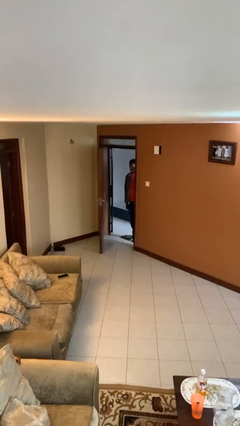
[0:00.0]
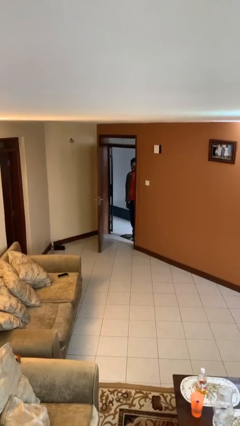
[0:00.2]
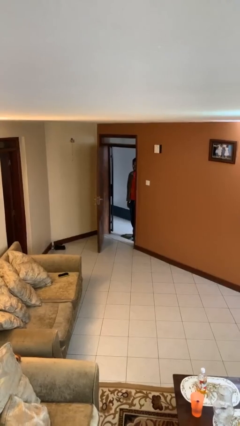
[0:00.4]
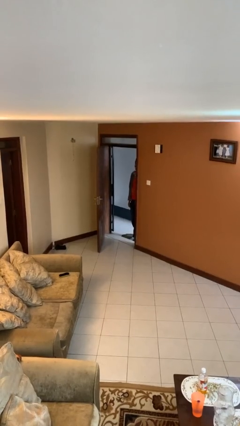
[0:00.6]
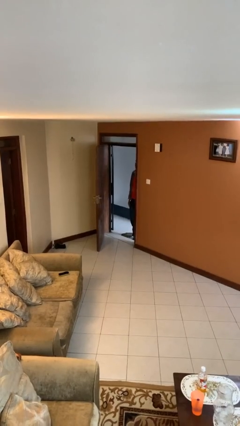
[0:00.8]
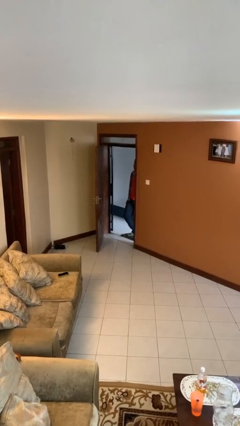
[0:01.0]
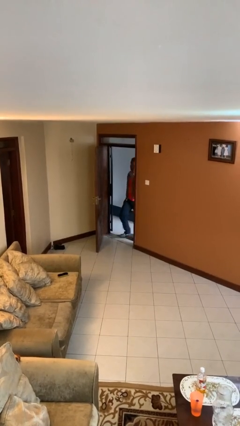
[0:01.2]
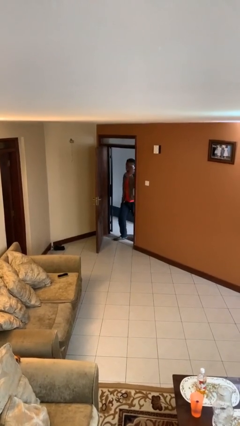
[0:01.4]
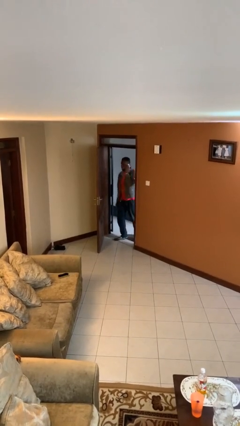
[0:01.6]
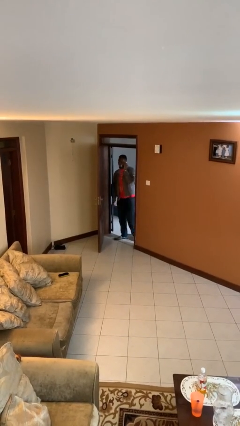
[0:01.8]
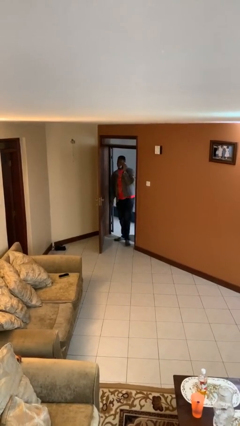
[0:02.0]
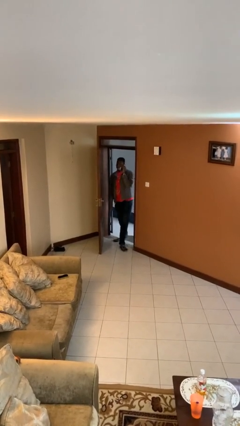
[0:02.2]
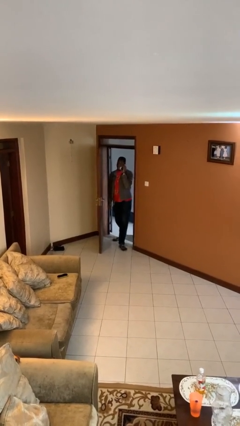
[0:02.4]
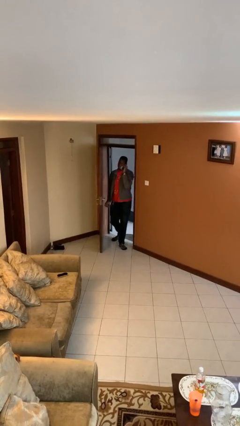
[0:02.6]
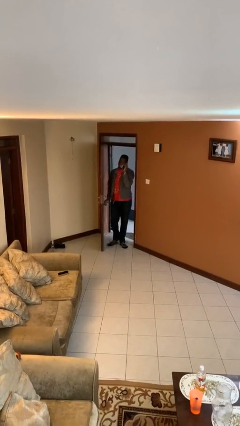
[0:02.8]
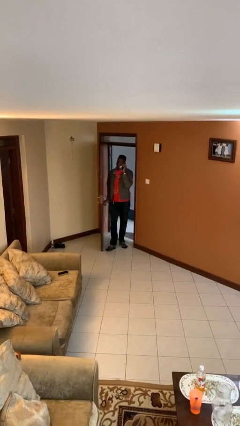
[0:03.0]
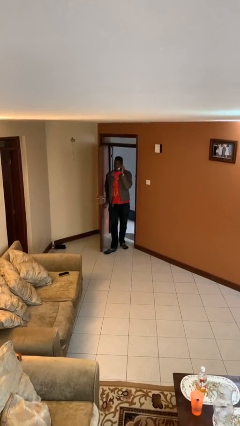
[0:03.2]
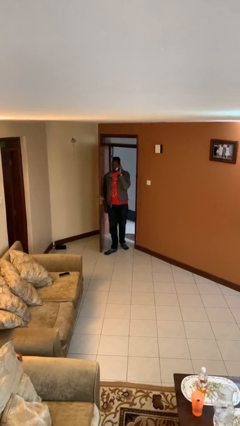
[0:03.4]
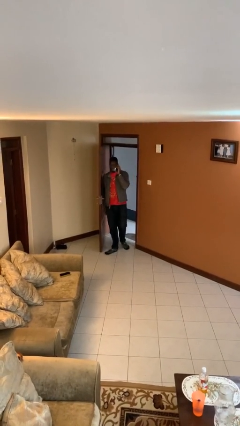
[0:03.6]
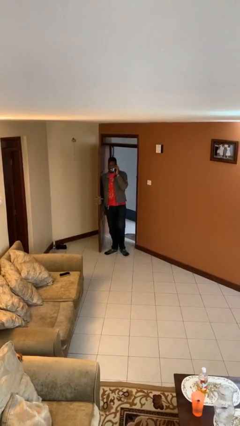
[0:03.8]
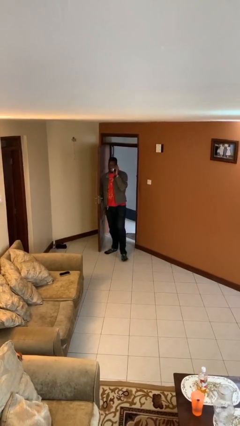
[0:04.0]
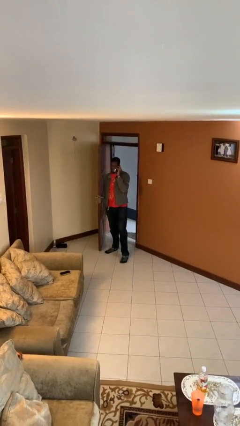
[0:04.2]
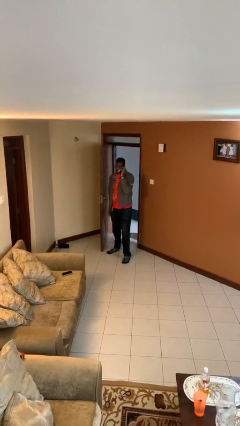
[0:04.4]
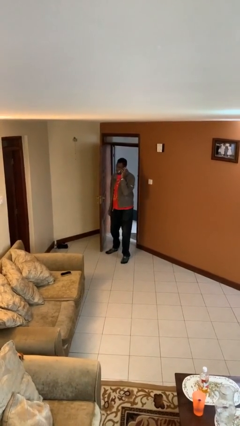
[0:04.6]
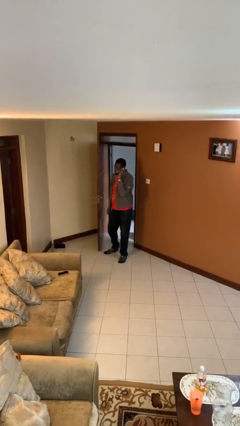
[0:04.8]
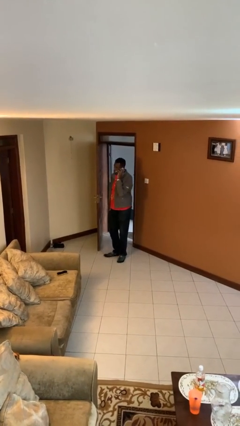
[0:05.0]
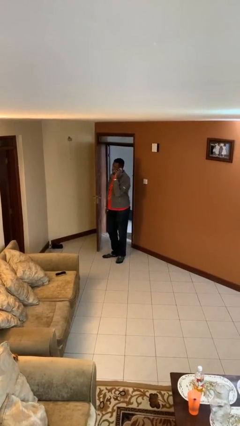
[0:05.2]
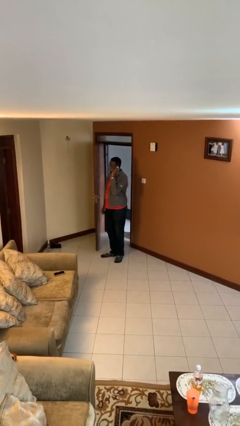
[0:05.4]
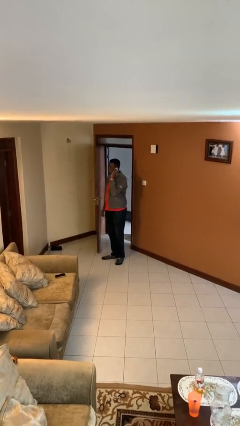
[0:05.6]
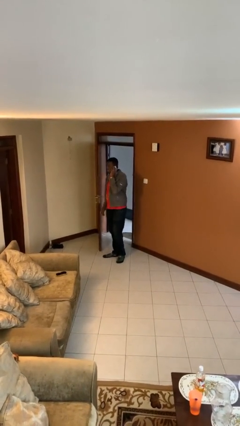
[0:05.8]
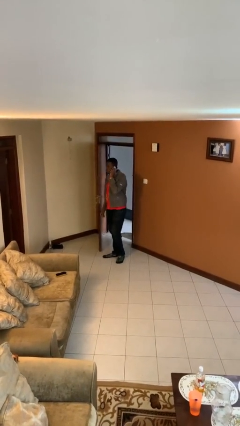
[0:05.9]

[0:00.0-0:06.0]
person enters scene through structure

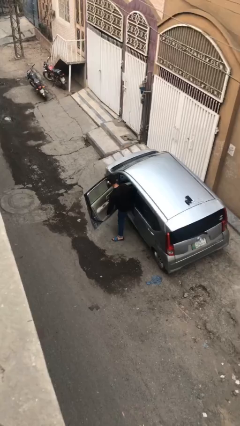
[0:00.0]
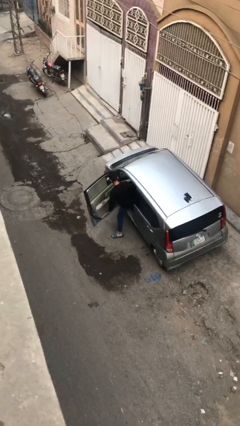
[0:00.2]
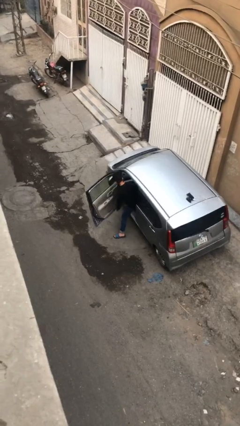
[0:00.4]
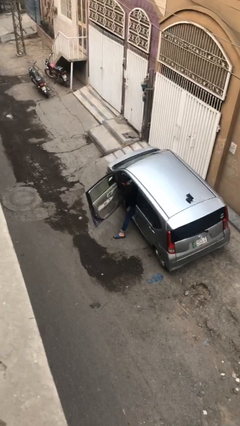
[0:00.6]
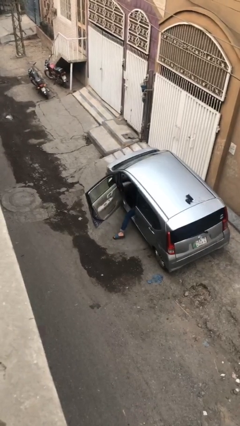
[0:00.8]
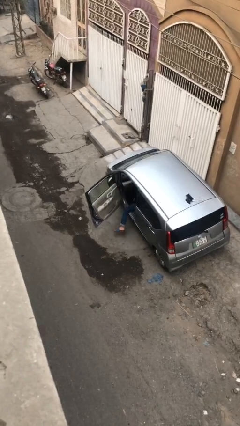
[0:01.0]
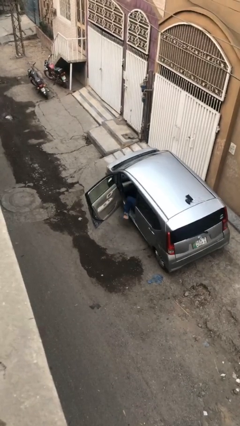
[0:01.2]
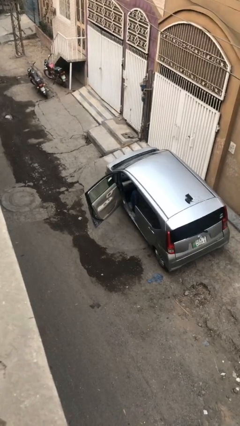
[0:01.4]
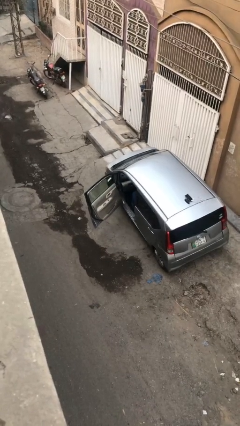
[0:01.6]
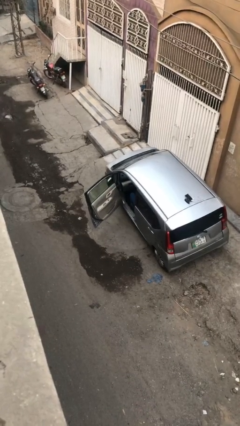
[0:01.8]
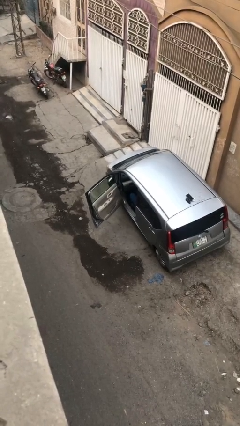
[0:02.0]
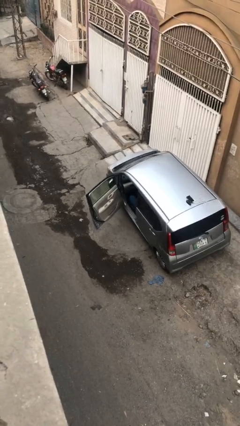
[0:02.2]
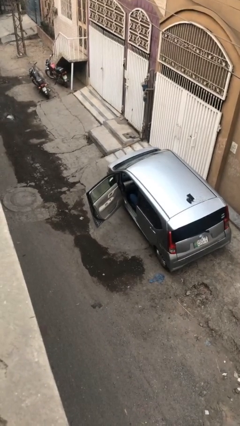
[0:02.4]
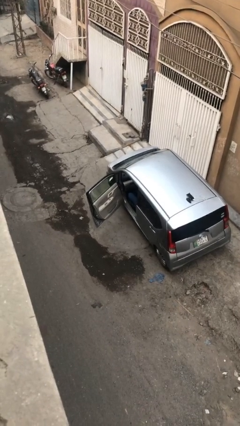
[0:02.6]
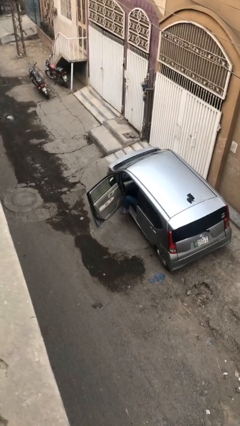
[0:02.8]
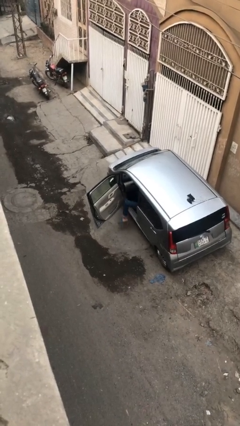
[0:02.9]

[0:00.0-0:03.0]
person enters car

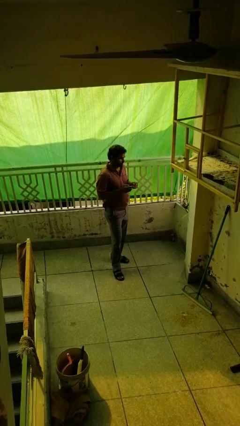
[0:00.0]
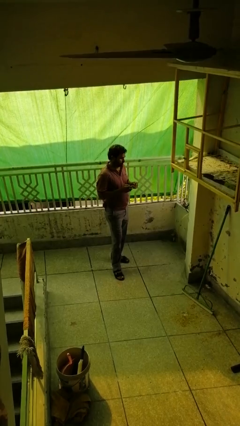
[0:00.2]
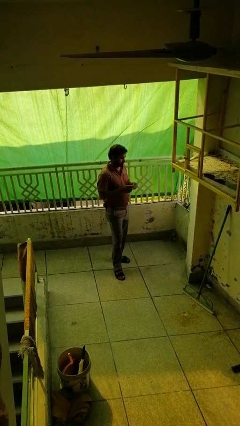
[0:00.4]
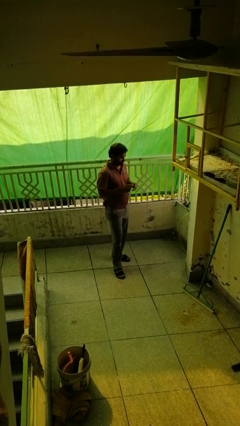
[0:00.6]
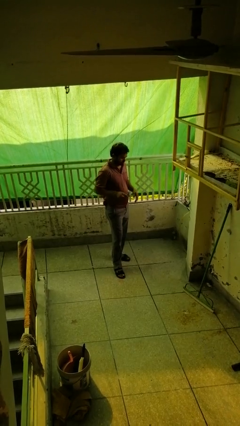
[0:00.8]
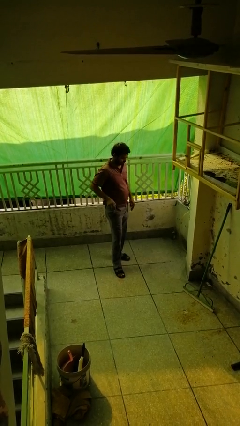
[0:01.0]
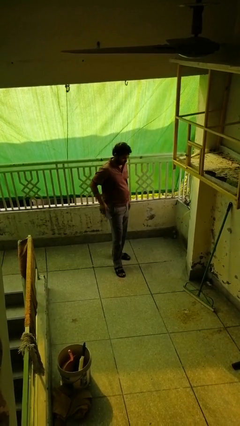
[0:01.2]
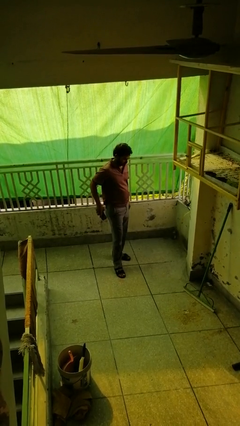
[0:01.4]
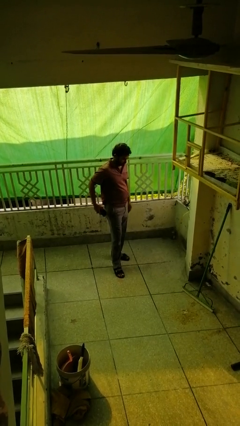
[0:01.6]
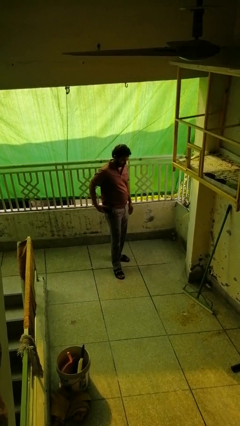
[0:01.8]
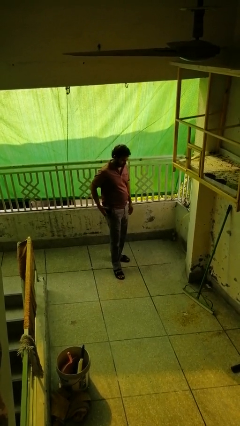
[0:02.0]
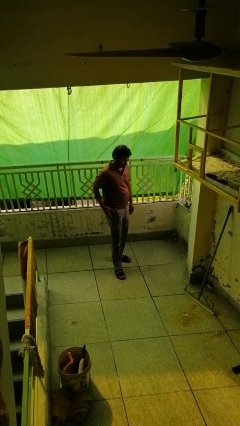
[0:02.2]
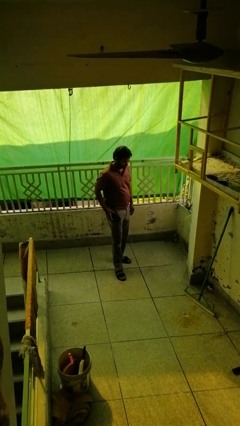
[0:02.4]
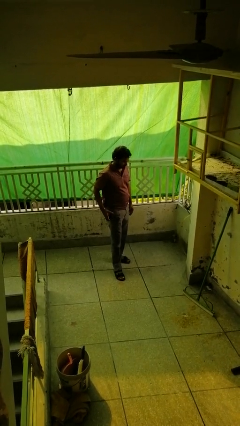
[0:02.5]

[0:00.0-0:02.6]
person puts phone into pocket

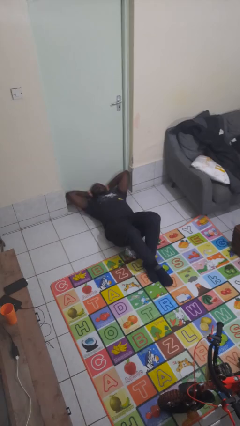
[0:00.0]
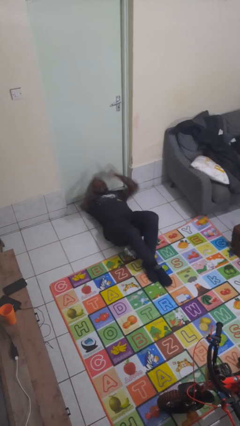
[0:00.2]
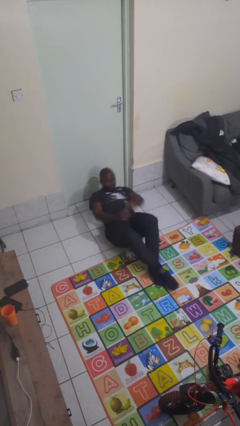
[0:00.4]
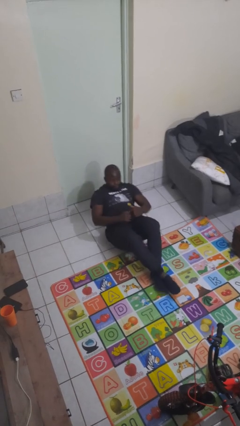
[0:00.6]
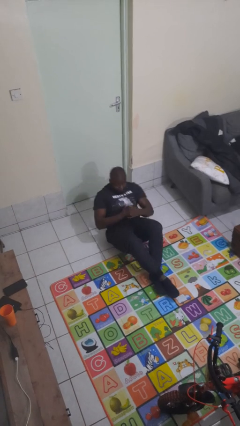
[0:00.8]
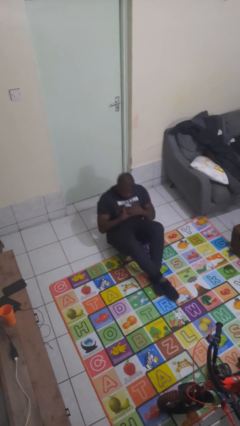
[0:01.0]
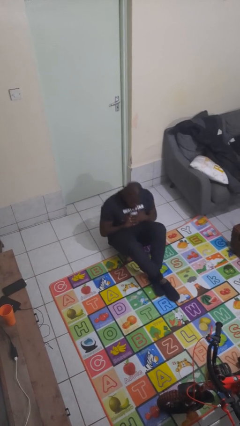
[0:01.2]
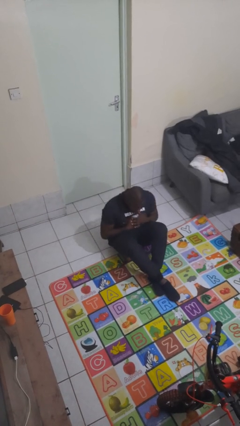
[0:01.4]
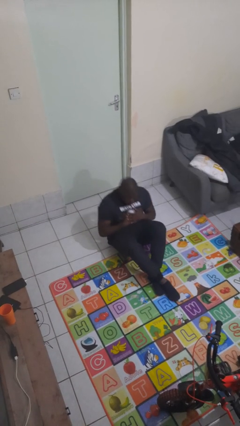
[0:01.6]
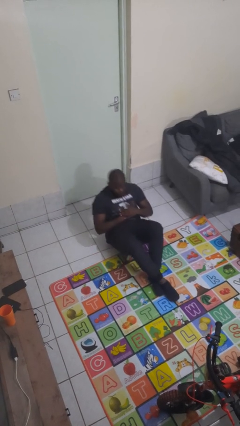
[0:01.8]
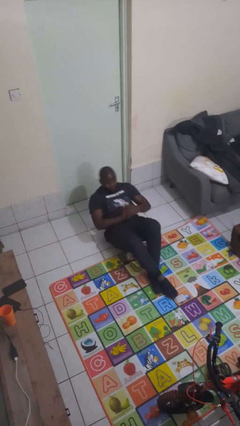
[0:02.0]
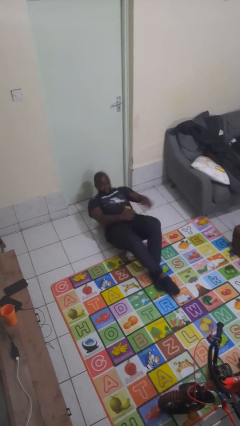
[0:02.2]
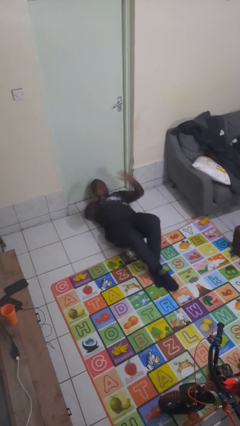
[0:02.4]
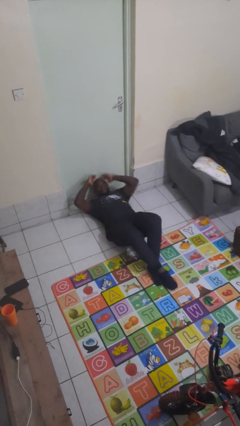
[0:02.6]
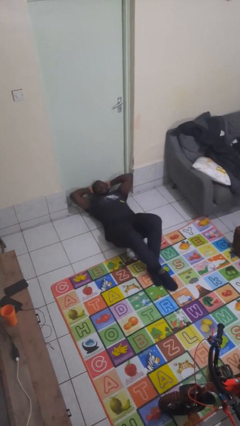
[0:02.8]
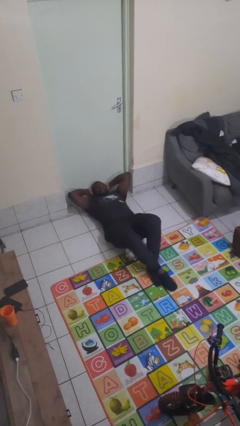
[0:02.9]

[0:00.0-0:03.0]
person exercises with situp

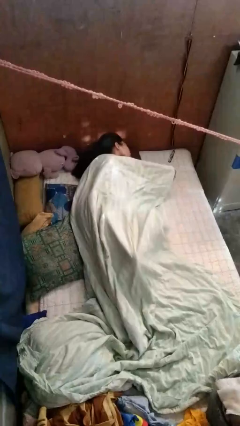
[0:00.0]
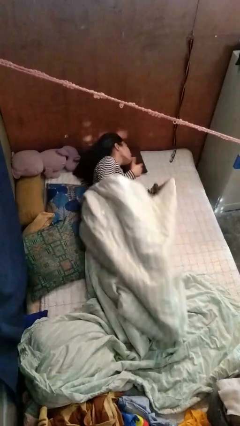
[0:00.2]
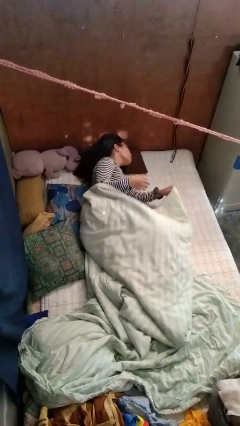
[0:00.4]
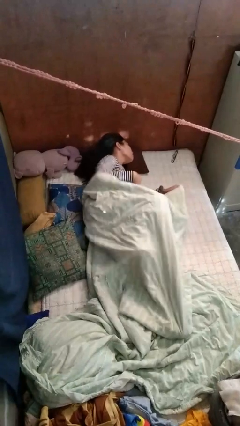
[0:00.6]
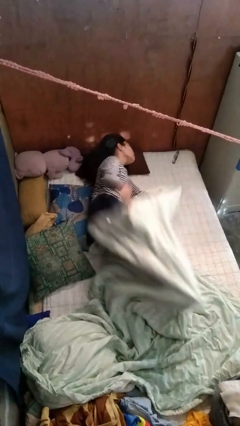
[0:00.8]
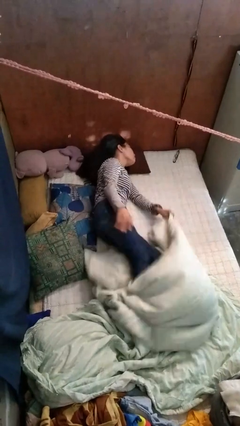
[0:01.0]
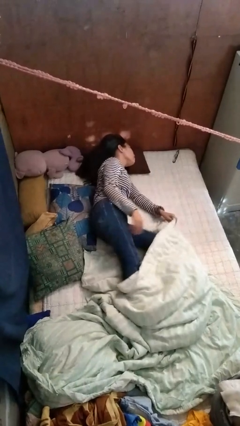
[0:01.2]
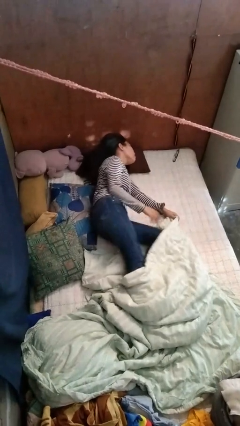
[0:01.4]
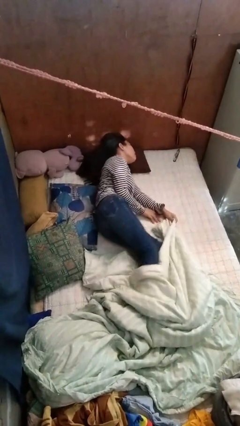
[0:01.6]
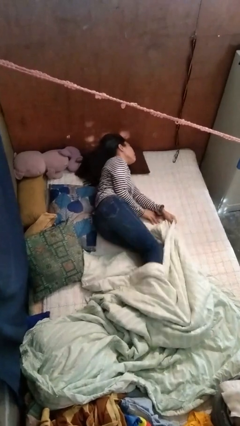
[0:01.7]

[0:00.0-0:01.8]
person uncovers with bedsheets

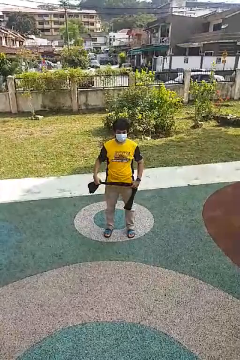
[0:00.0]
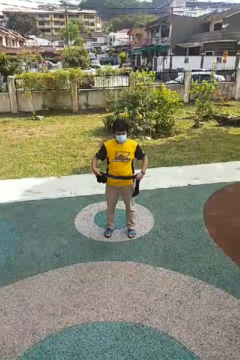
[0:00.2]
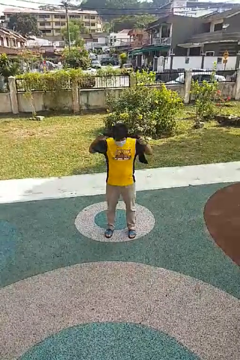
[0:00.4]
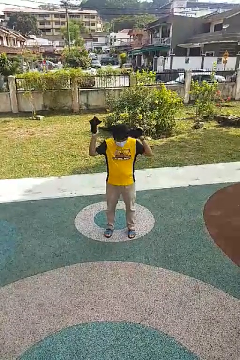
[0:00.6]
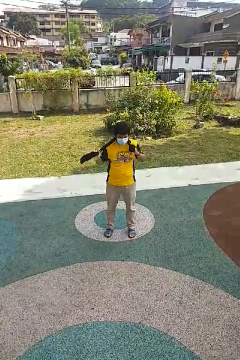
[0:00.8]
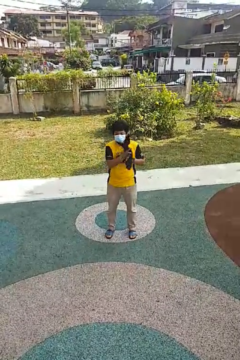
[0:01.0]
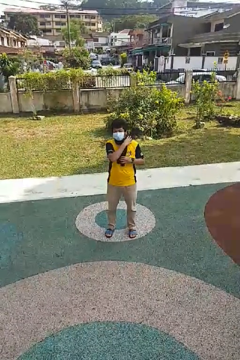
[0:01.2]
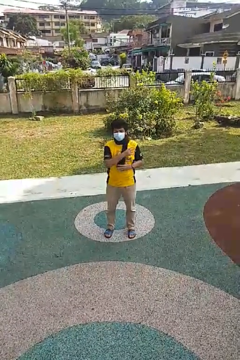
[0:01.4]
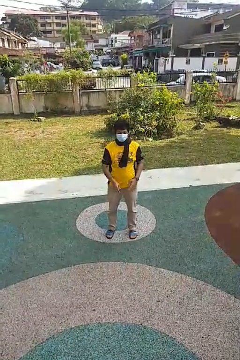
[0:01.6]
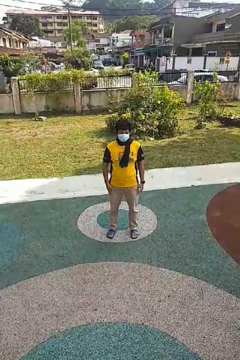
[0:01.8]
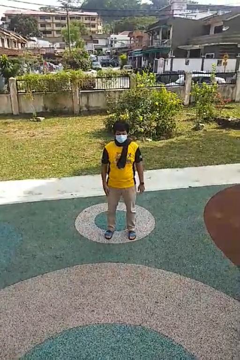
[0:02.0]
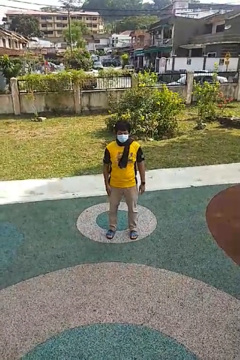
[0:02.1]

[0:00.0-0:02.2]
person puts on scarf
